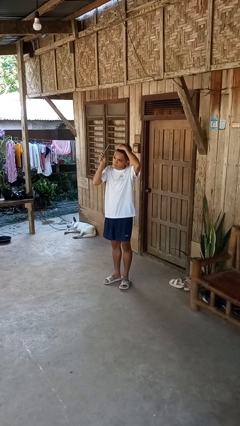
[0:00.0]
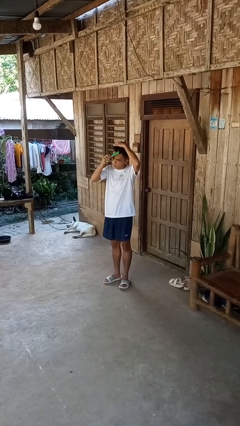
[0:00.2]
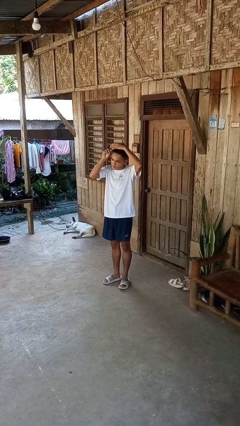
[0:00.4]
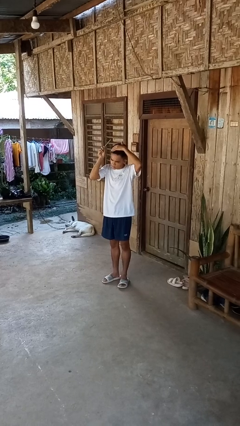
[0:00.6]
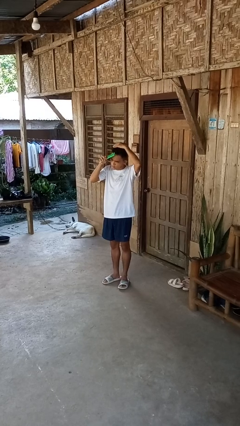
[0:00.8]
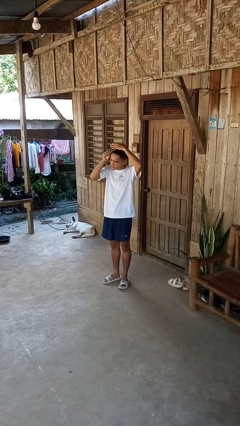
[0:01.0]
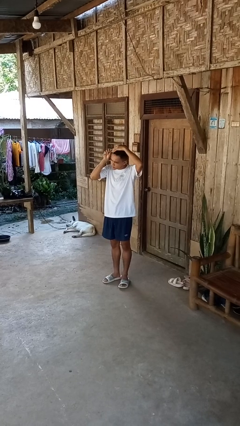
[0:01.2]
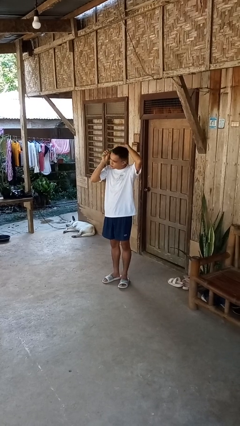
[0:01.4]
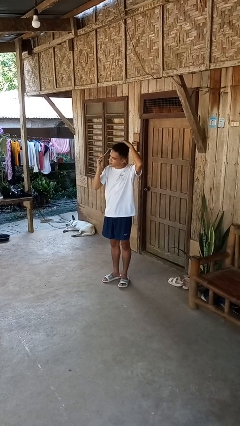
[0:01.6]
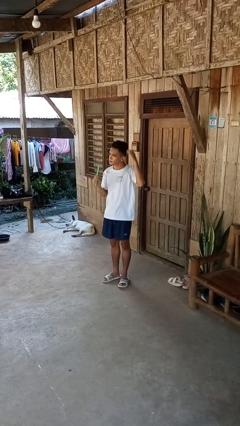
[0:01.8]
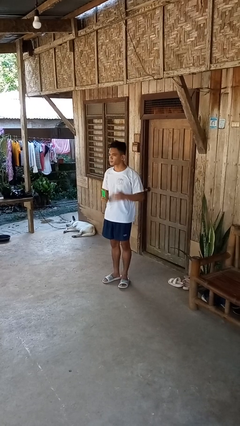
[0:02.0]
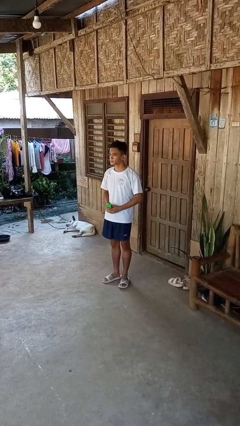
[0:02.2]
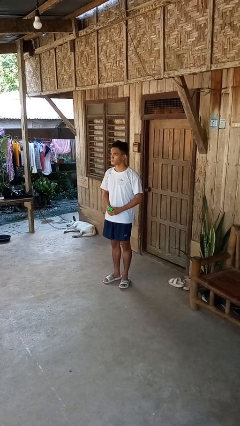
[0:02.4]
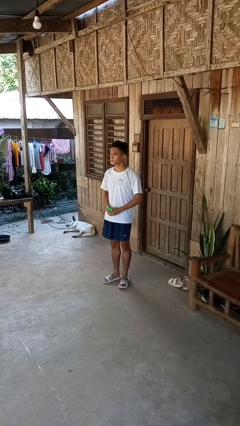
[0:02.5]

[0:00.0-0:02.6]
person brushes hair

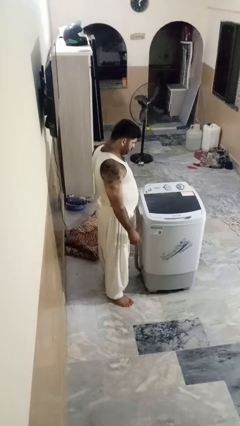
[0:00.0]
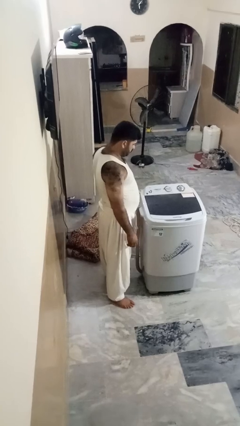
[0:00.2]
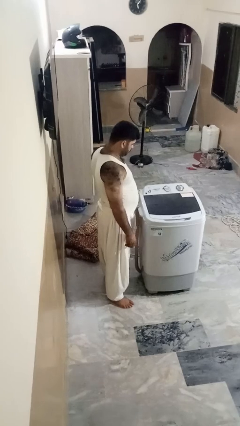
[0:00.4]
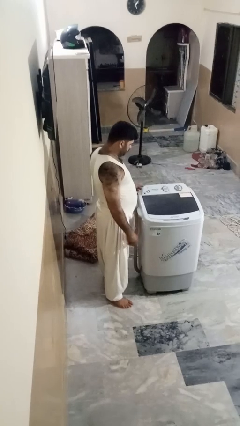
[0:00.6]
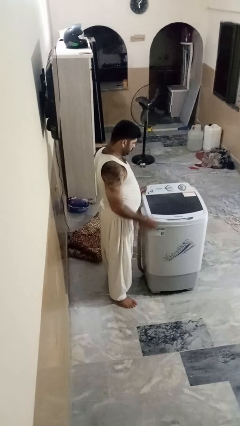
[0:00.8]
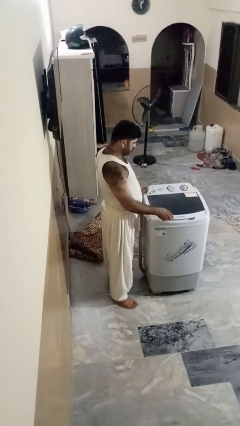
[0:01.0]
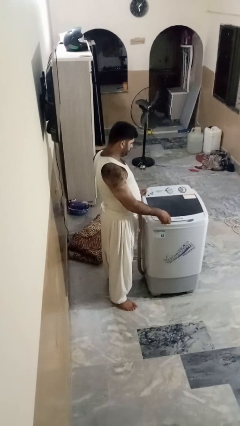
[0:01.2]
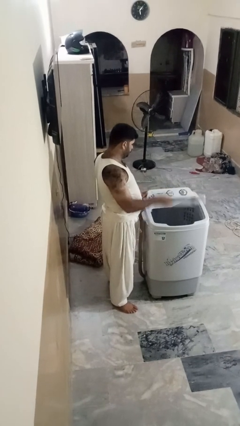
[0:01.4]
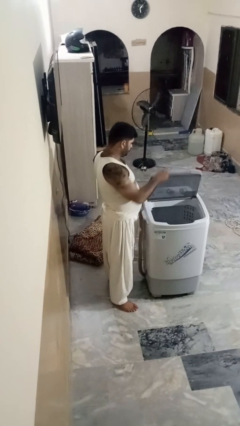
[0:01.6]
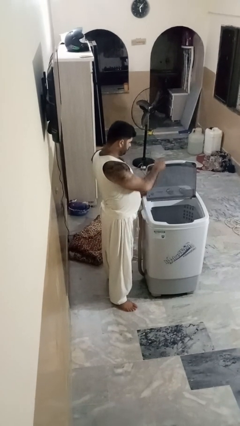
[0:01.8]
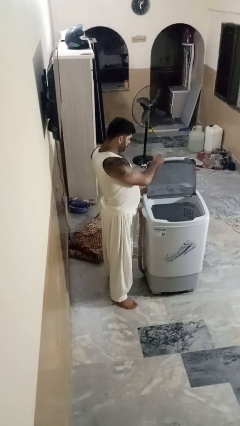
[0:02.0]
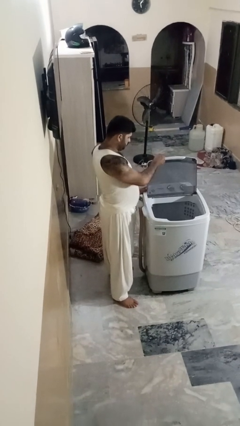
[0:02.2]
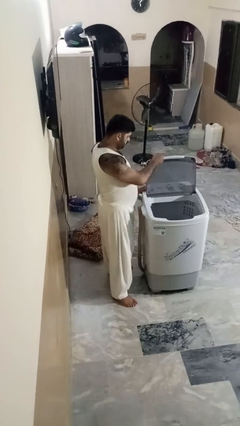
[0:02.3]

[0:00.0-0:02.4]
person opens clothes washer

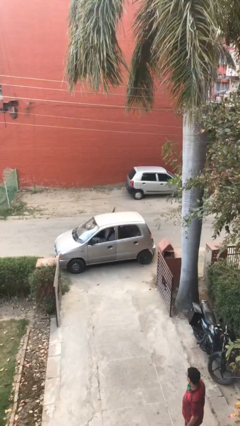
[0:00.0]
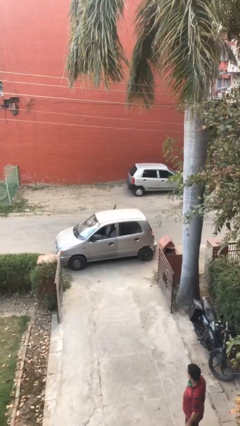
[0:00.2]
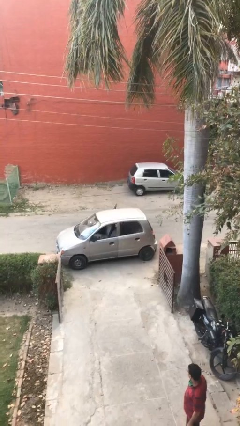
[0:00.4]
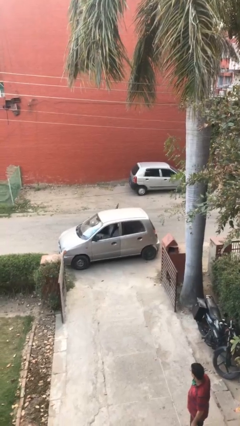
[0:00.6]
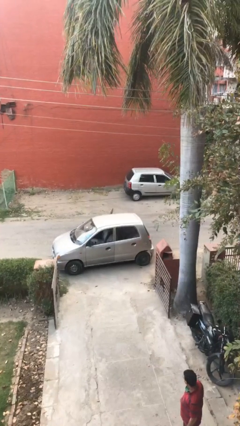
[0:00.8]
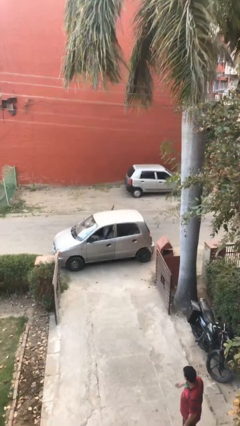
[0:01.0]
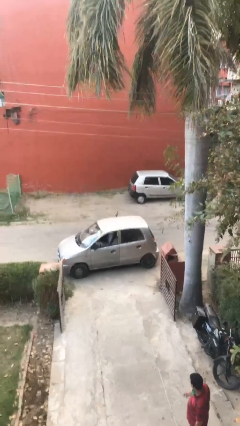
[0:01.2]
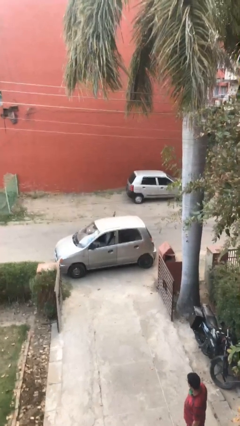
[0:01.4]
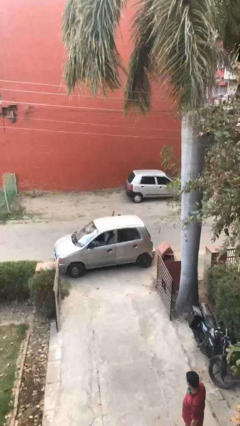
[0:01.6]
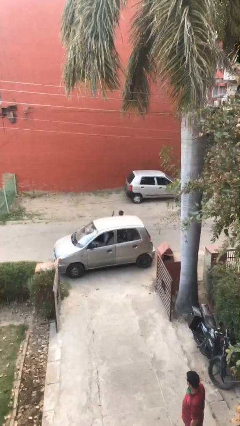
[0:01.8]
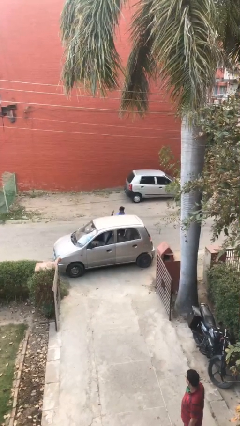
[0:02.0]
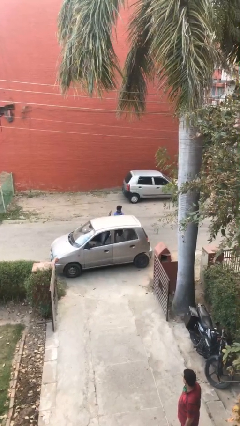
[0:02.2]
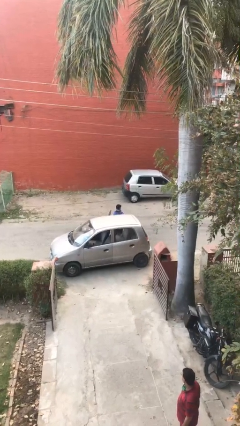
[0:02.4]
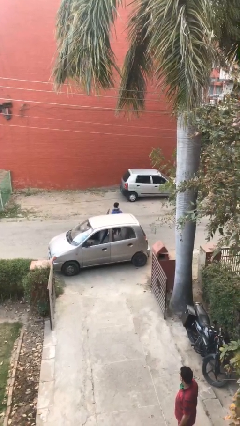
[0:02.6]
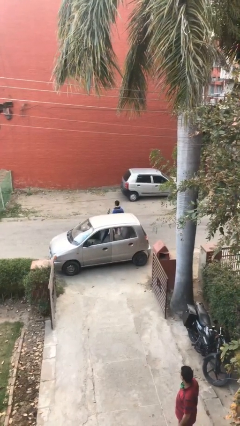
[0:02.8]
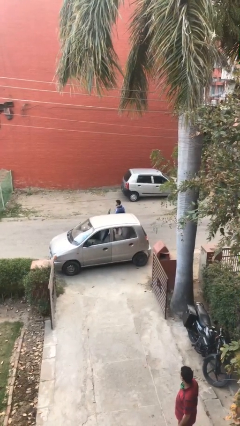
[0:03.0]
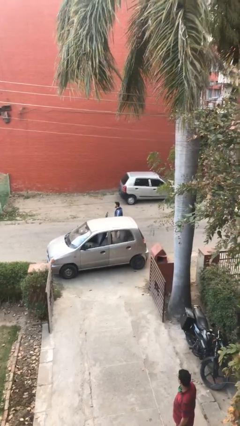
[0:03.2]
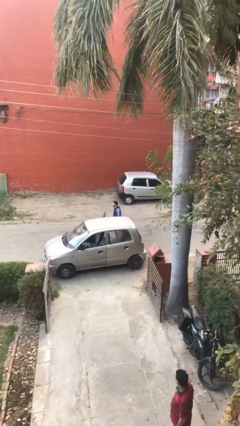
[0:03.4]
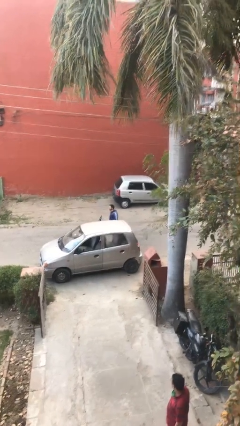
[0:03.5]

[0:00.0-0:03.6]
person exits car

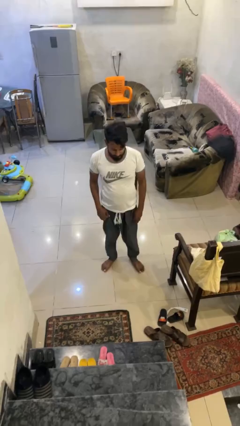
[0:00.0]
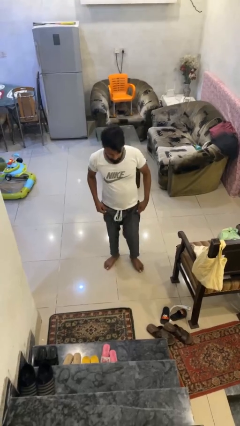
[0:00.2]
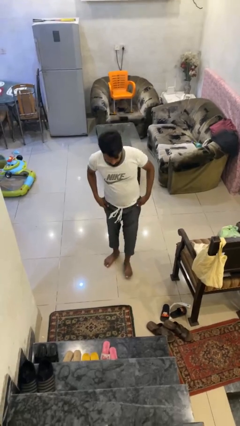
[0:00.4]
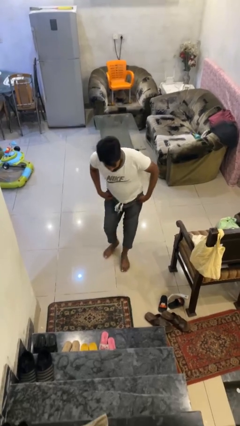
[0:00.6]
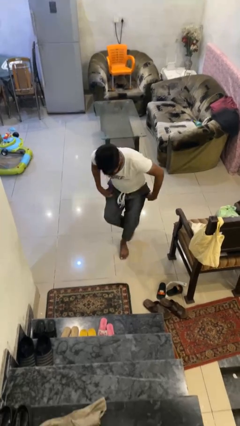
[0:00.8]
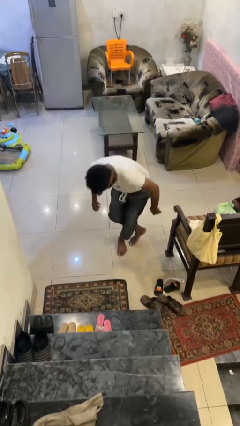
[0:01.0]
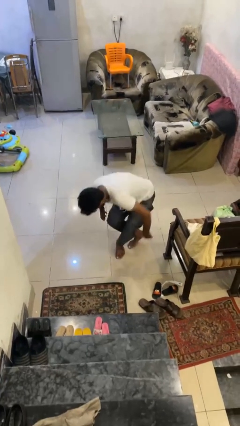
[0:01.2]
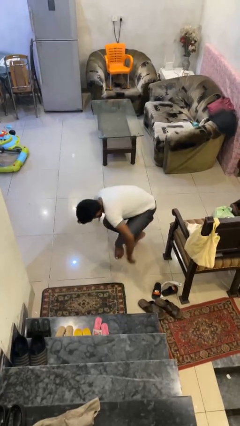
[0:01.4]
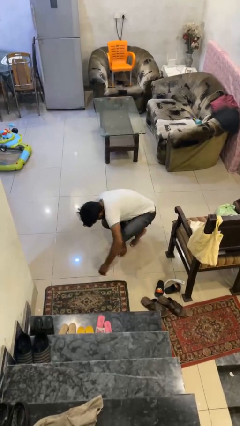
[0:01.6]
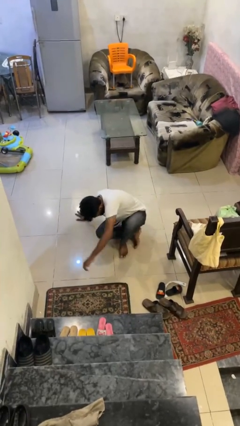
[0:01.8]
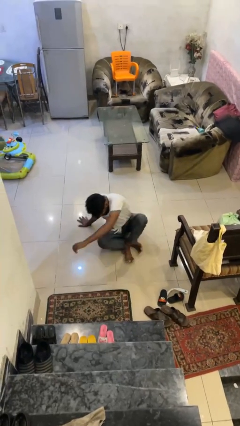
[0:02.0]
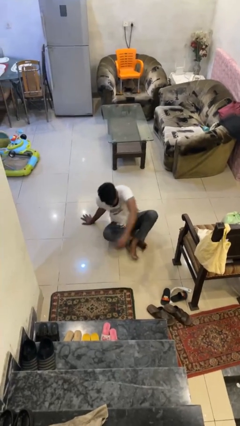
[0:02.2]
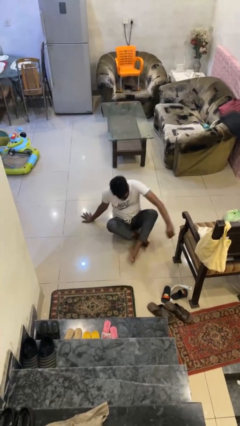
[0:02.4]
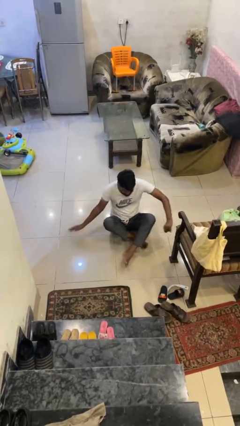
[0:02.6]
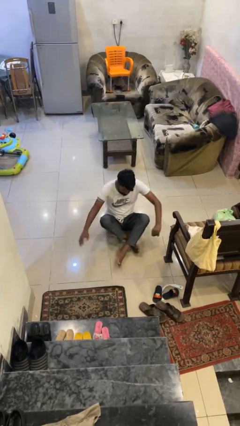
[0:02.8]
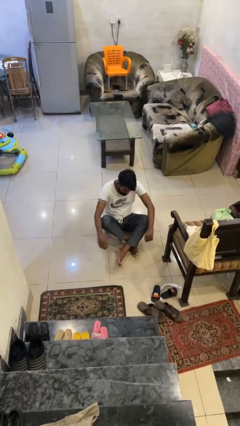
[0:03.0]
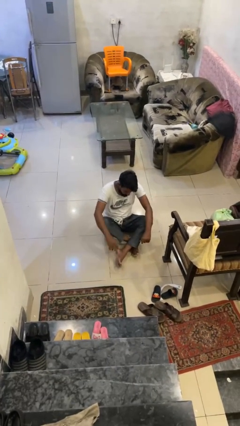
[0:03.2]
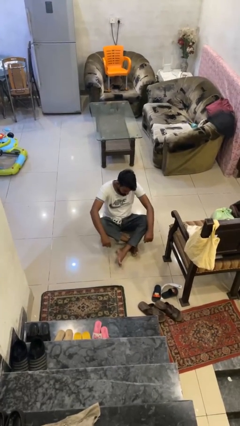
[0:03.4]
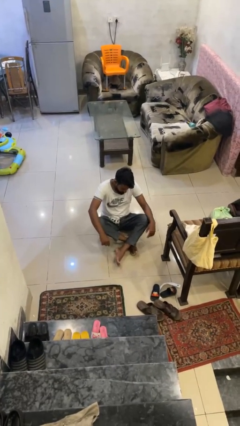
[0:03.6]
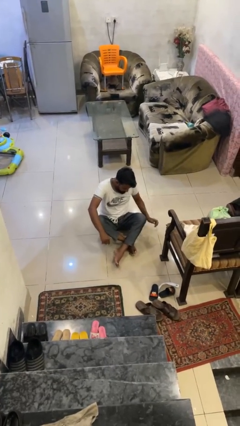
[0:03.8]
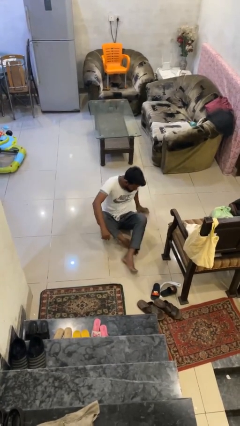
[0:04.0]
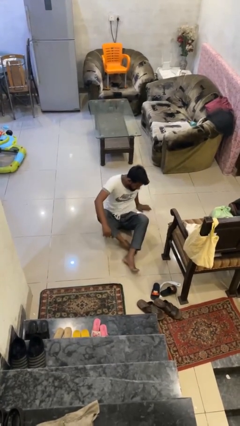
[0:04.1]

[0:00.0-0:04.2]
person sits crisscross

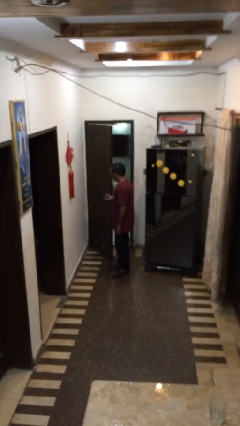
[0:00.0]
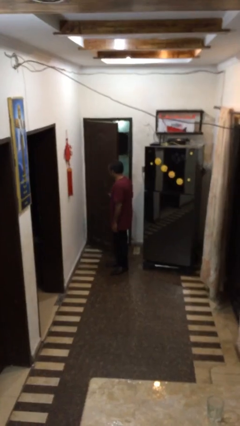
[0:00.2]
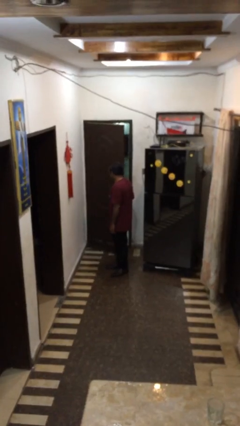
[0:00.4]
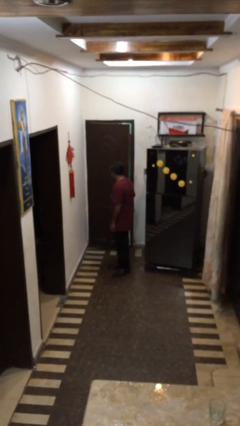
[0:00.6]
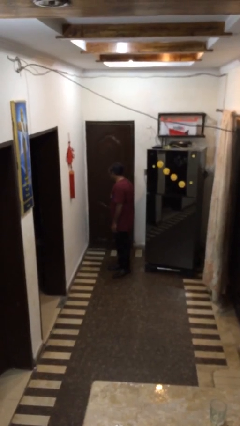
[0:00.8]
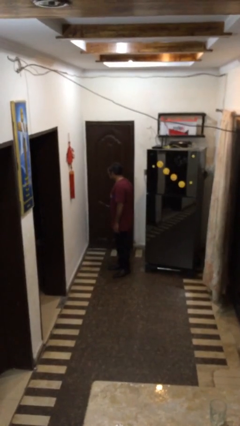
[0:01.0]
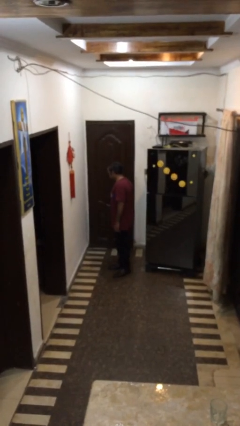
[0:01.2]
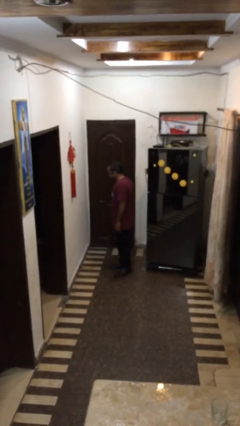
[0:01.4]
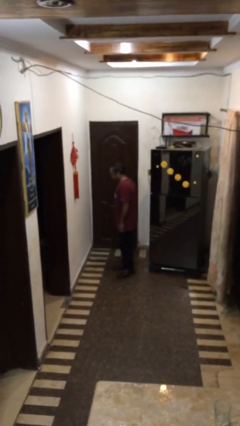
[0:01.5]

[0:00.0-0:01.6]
person closes facility door

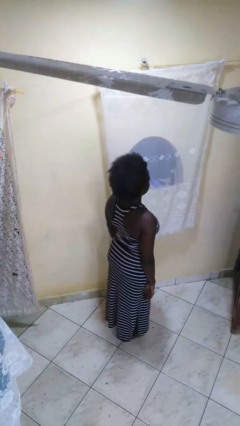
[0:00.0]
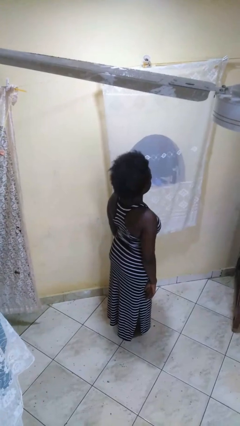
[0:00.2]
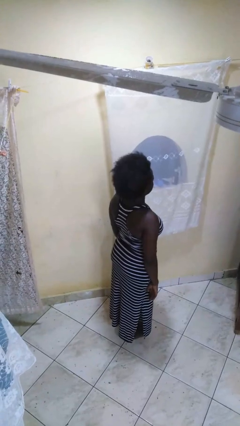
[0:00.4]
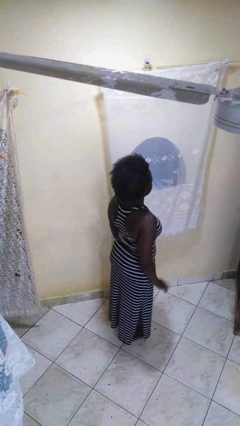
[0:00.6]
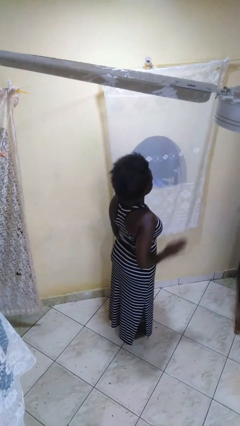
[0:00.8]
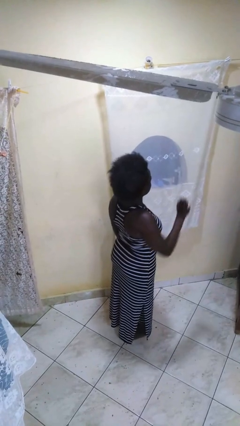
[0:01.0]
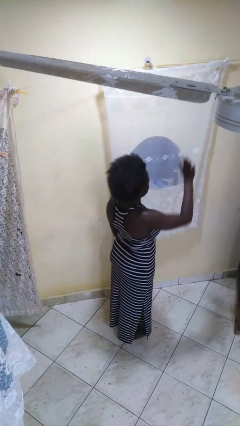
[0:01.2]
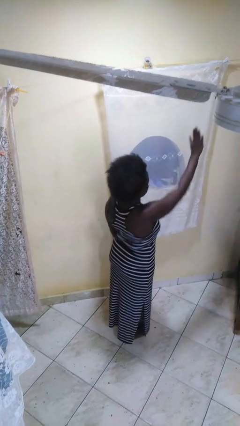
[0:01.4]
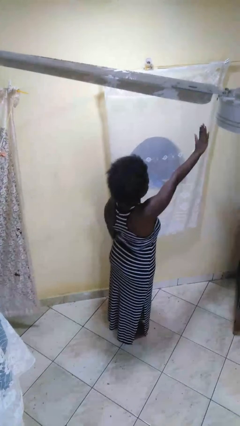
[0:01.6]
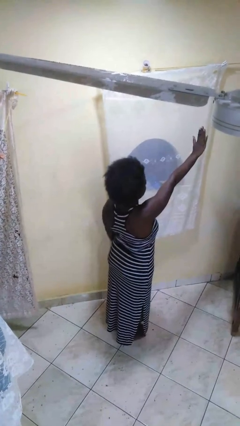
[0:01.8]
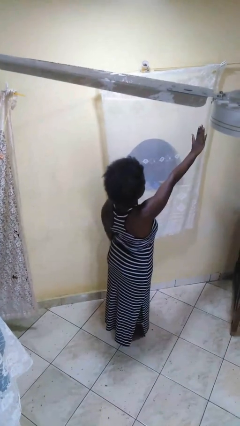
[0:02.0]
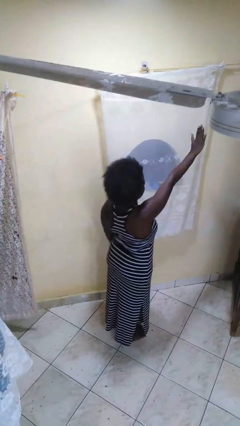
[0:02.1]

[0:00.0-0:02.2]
person gestures stop

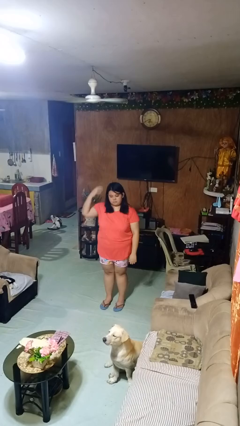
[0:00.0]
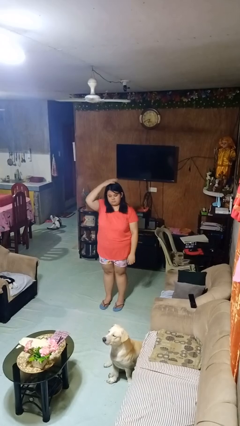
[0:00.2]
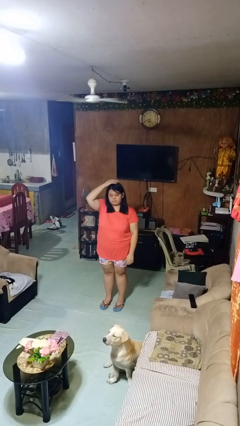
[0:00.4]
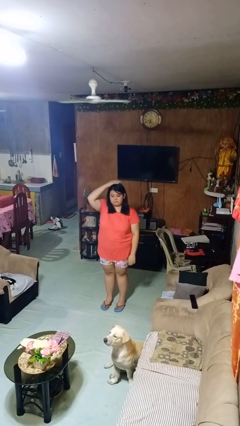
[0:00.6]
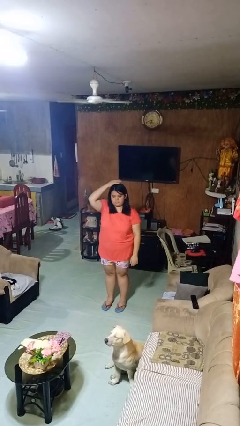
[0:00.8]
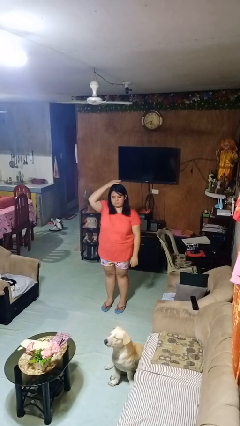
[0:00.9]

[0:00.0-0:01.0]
person pats head
